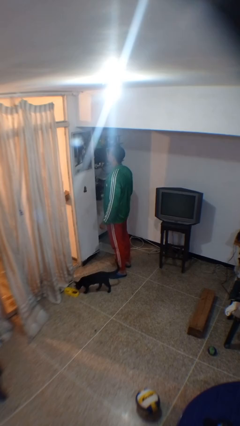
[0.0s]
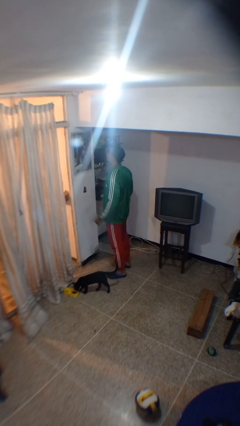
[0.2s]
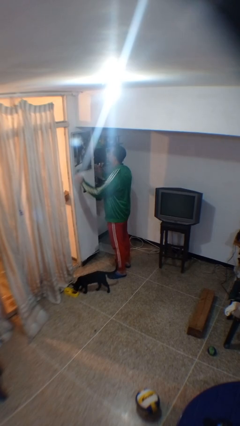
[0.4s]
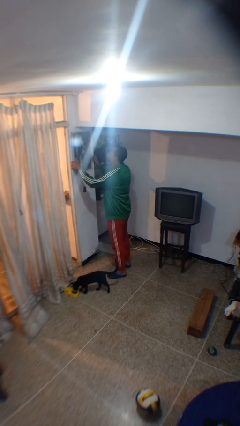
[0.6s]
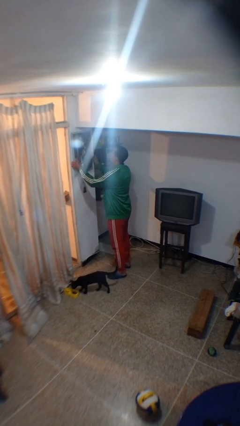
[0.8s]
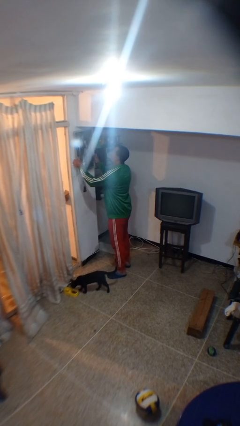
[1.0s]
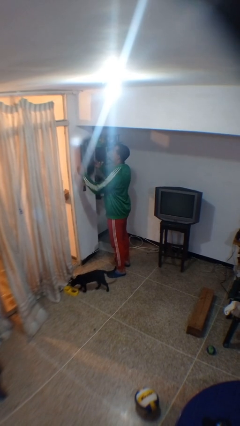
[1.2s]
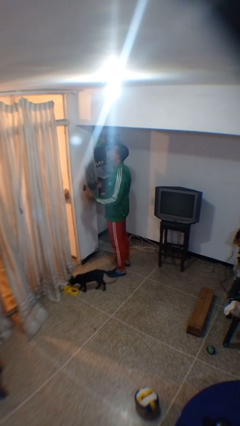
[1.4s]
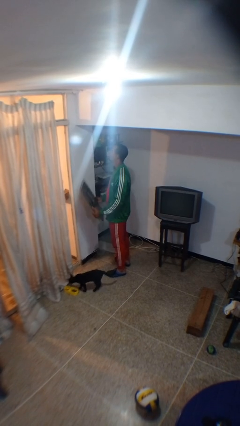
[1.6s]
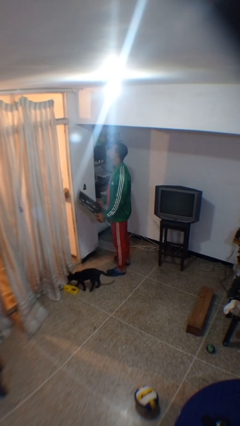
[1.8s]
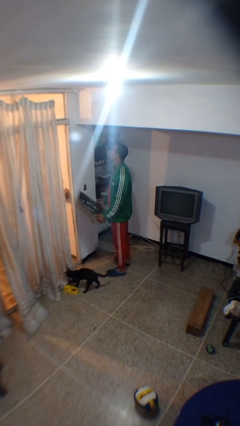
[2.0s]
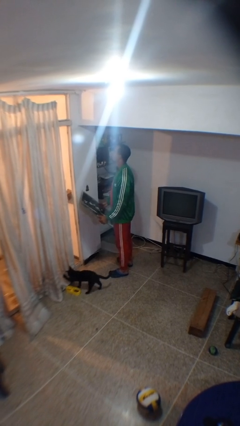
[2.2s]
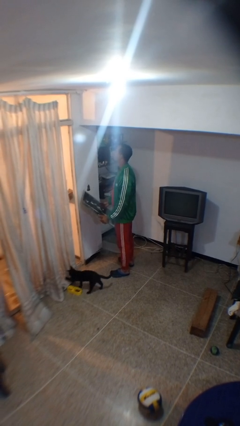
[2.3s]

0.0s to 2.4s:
person takes down picture frame

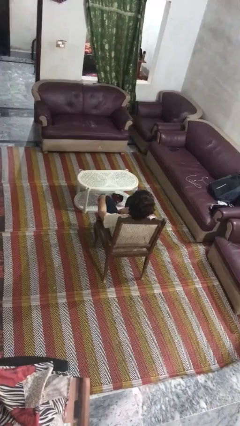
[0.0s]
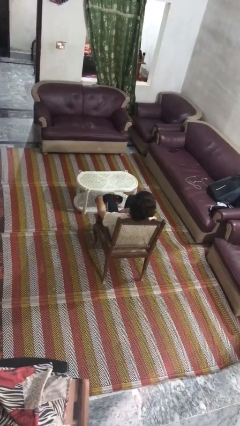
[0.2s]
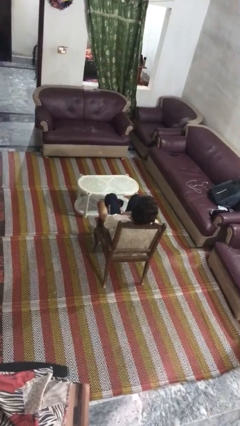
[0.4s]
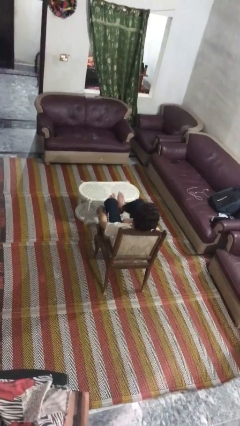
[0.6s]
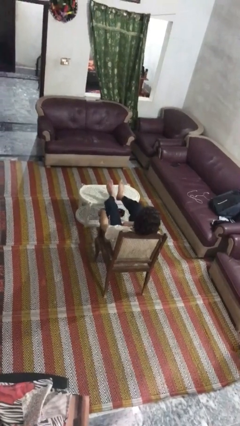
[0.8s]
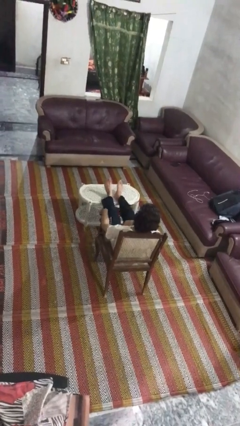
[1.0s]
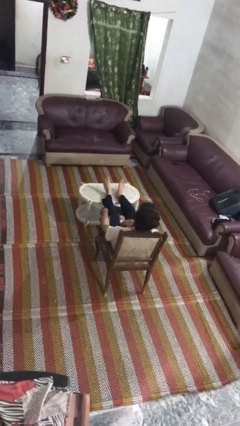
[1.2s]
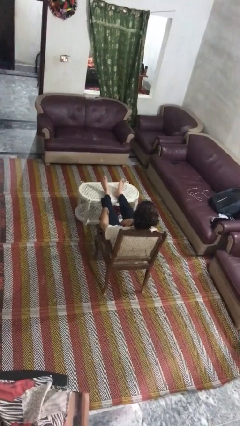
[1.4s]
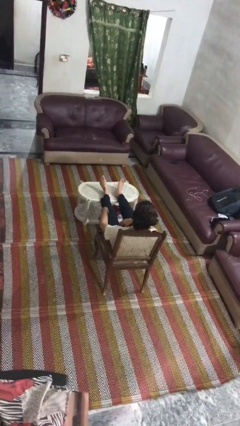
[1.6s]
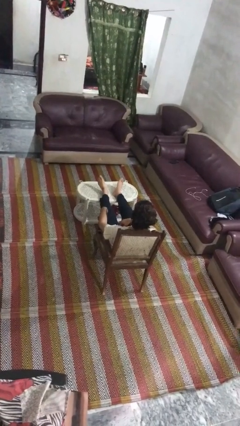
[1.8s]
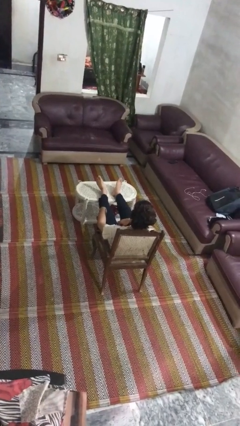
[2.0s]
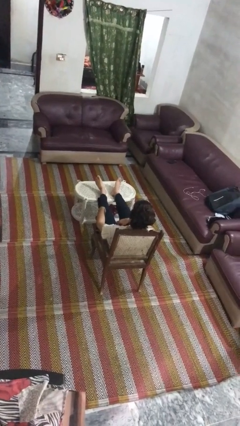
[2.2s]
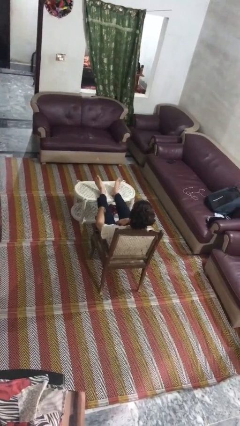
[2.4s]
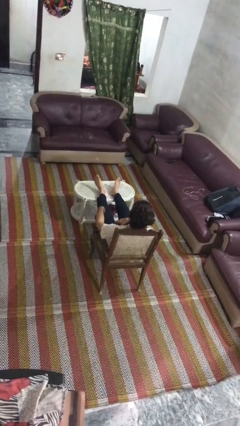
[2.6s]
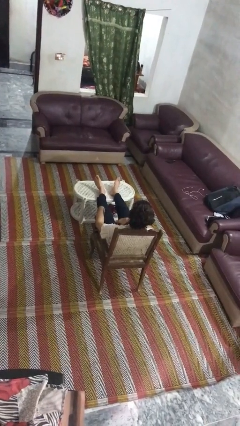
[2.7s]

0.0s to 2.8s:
person puts feet up

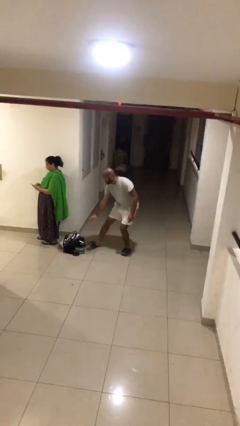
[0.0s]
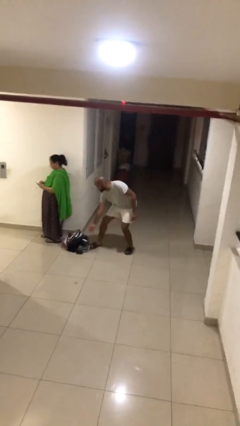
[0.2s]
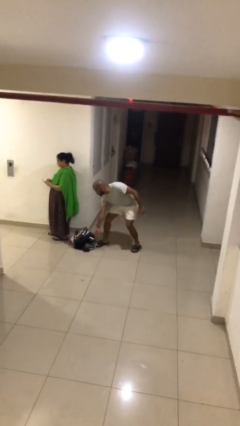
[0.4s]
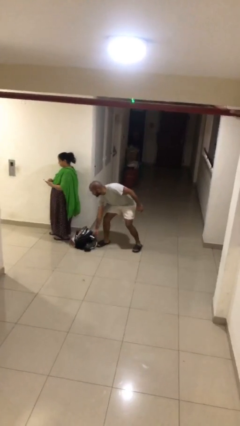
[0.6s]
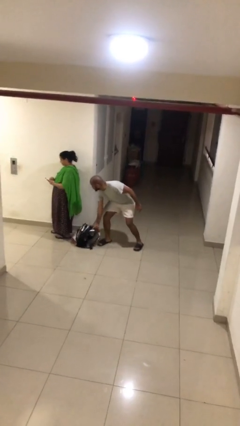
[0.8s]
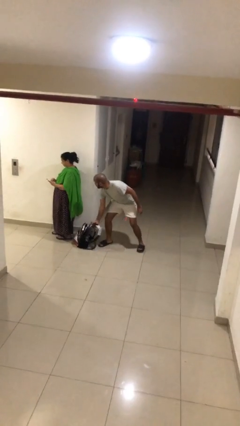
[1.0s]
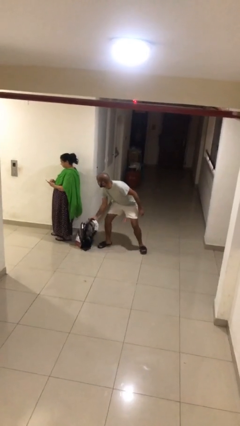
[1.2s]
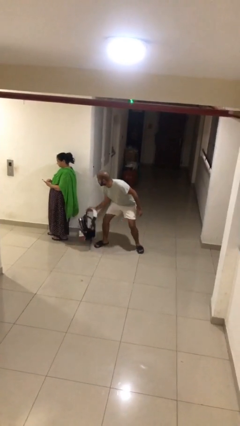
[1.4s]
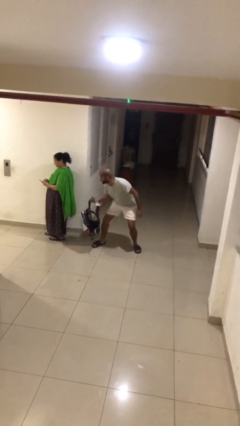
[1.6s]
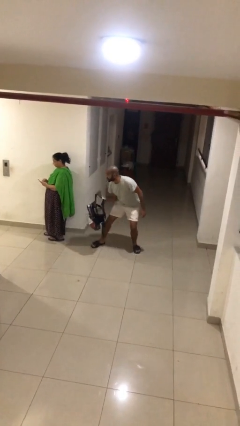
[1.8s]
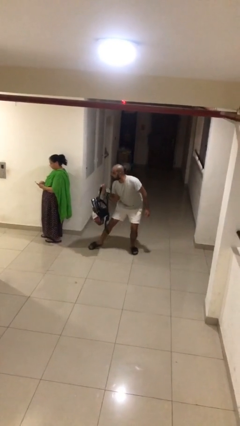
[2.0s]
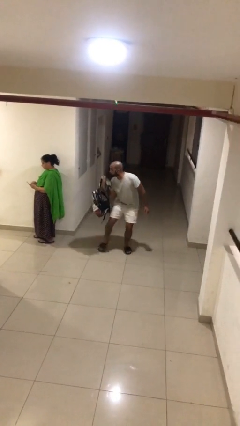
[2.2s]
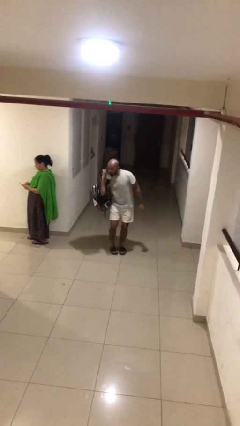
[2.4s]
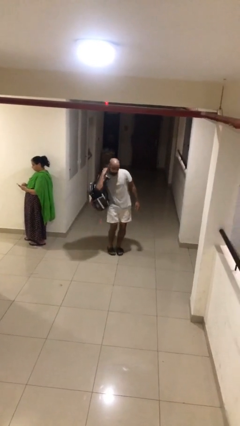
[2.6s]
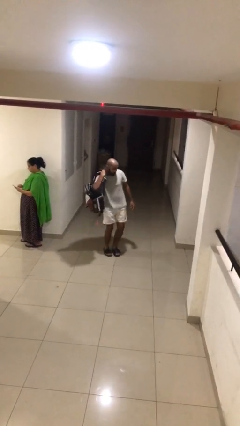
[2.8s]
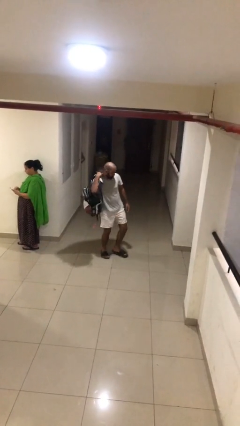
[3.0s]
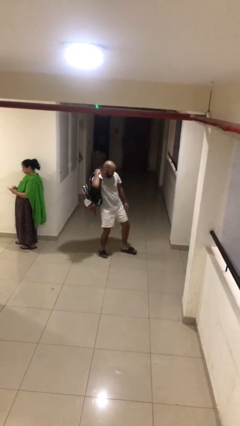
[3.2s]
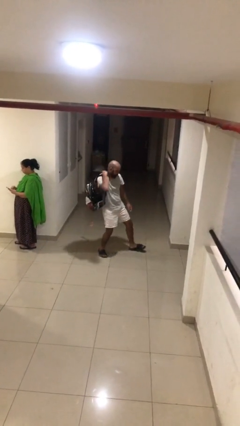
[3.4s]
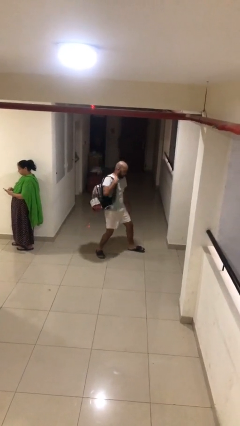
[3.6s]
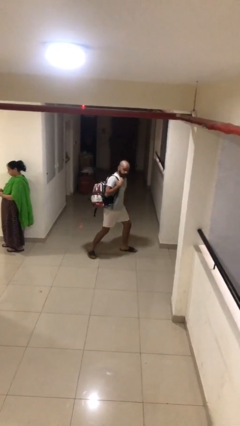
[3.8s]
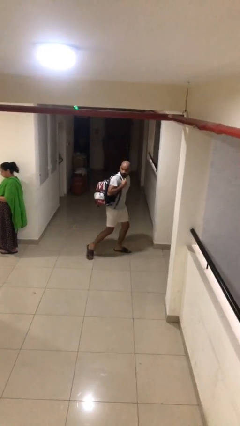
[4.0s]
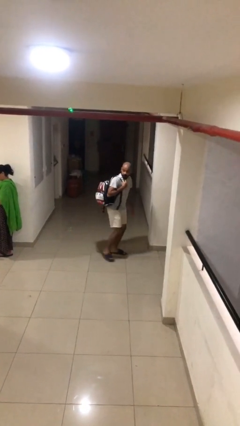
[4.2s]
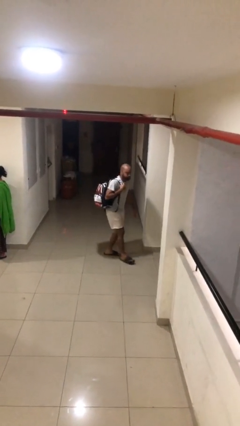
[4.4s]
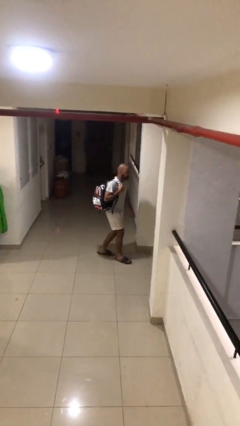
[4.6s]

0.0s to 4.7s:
person steals object from person

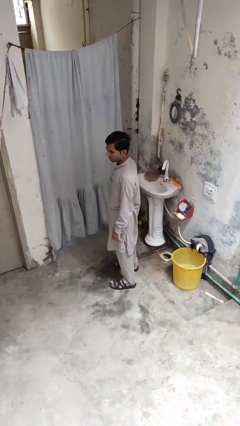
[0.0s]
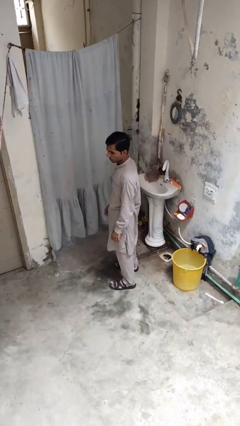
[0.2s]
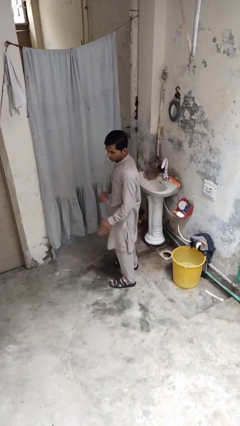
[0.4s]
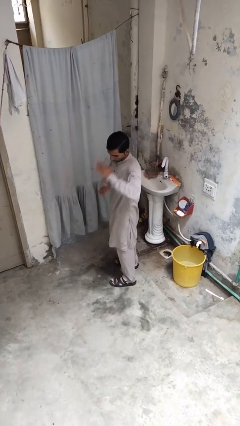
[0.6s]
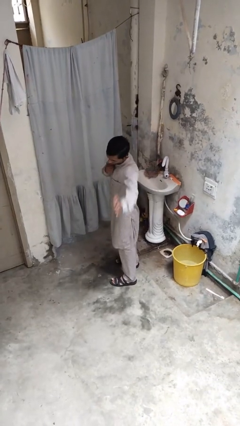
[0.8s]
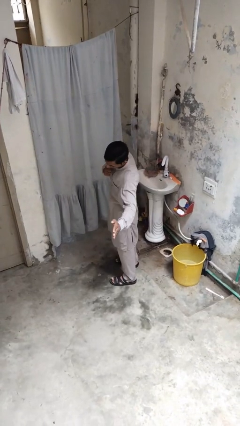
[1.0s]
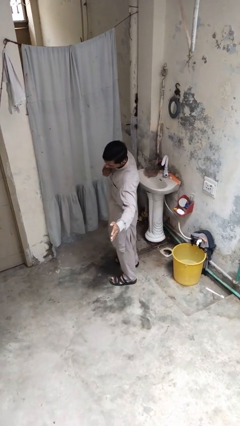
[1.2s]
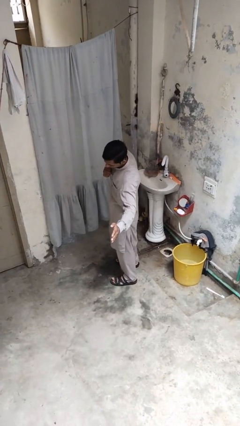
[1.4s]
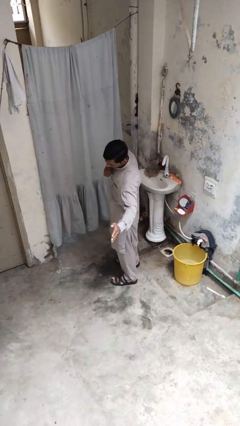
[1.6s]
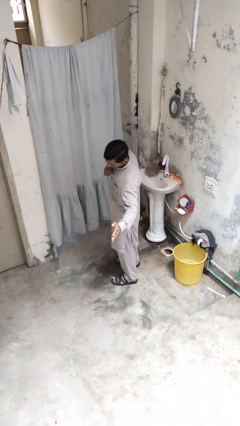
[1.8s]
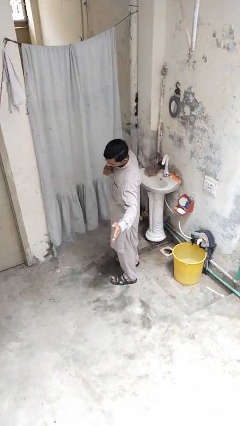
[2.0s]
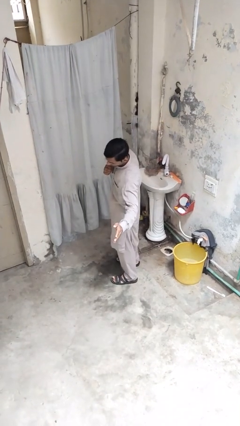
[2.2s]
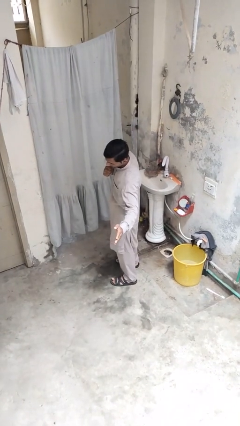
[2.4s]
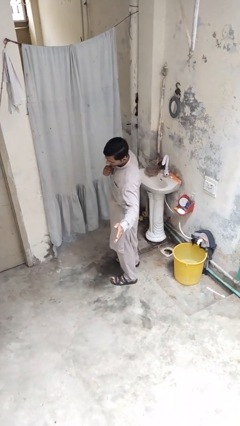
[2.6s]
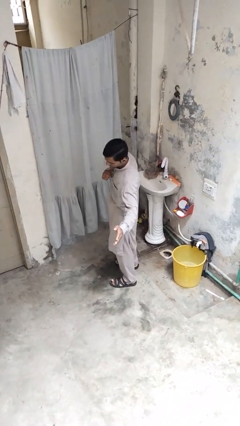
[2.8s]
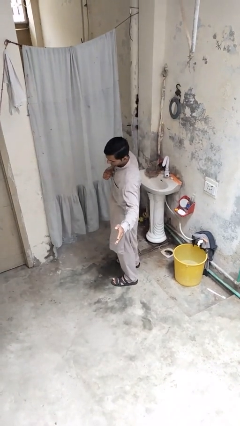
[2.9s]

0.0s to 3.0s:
person karate chop

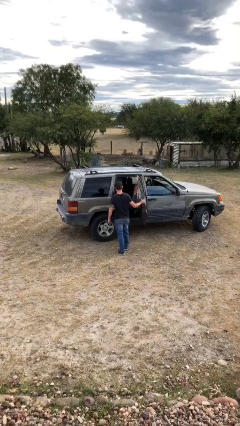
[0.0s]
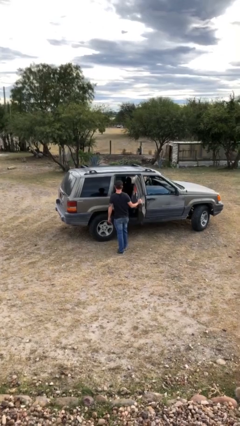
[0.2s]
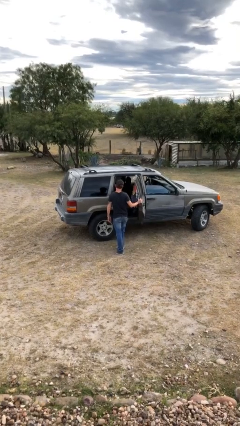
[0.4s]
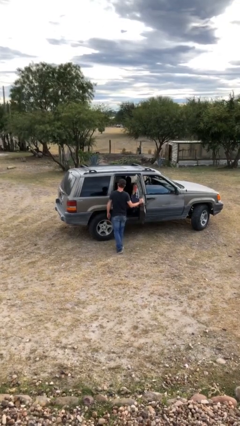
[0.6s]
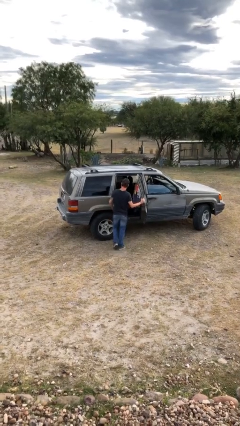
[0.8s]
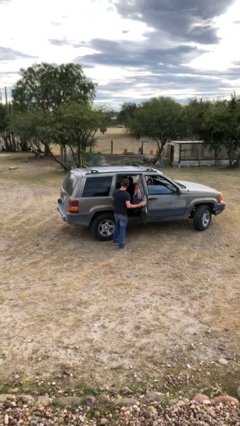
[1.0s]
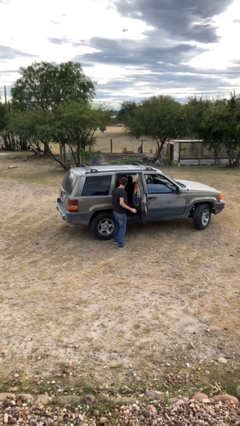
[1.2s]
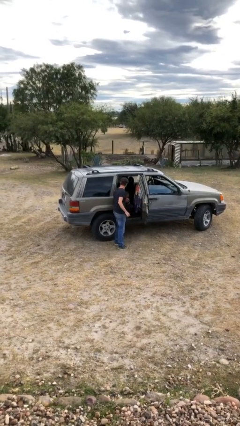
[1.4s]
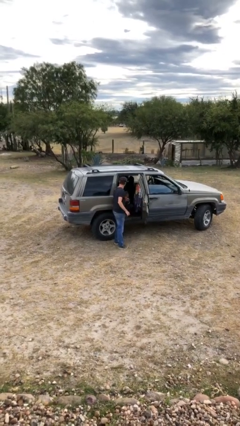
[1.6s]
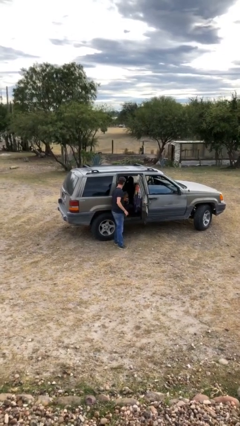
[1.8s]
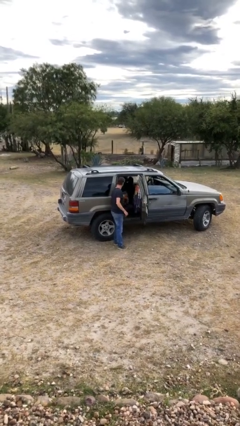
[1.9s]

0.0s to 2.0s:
person unloads car

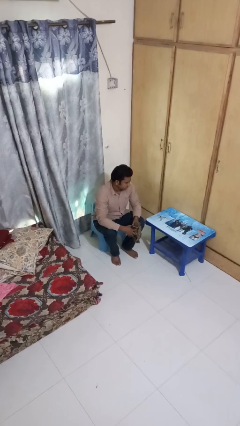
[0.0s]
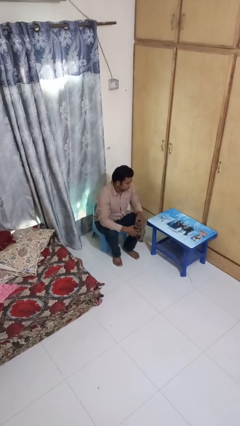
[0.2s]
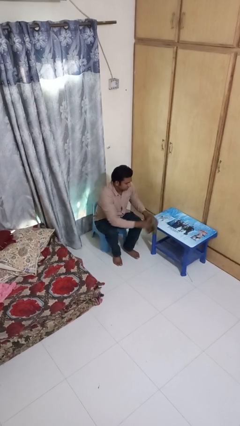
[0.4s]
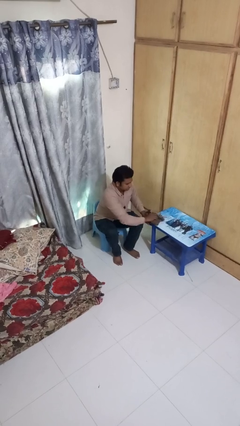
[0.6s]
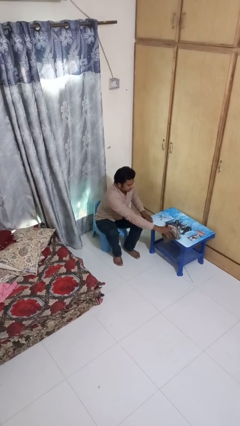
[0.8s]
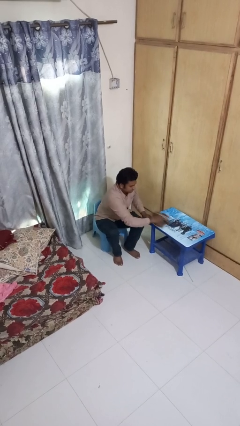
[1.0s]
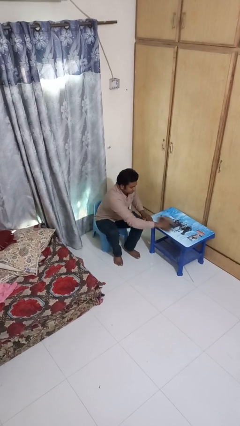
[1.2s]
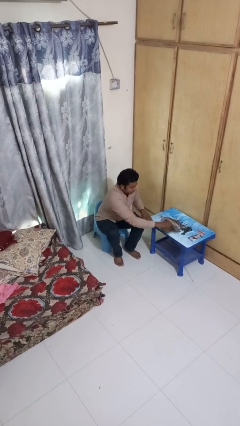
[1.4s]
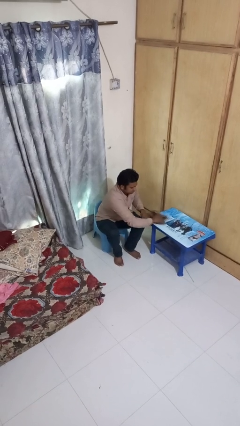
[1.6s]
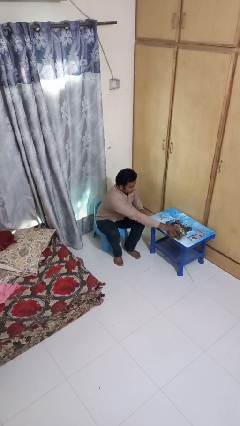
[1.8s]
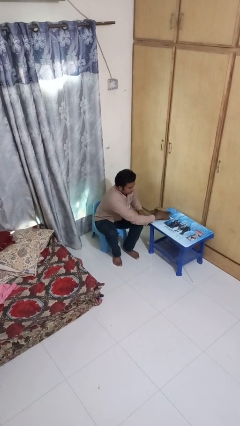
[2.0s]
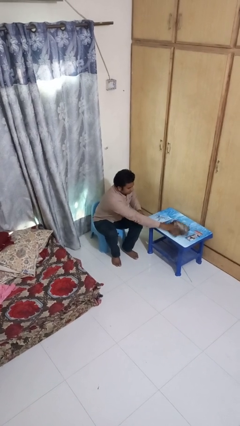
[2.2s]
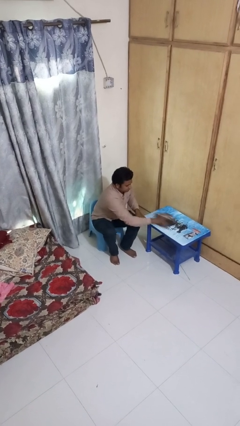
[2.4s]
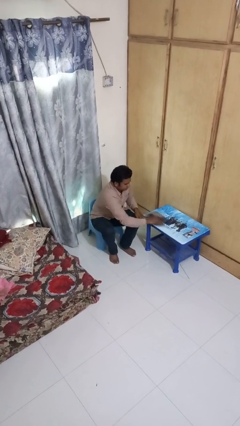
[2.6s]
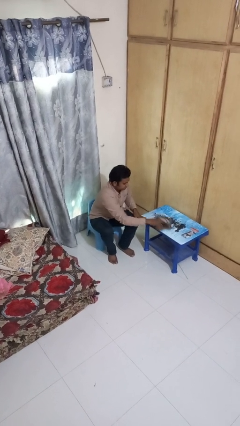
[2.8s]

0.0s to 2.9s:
person cleans table with rag
